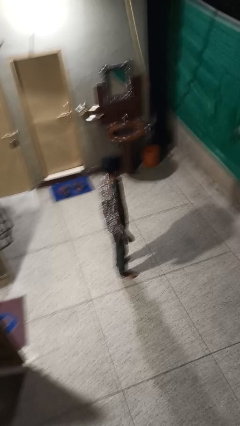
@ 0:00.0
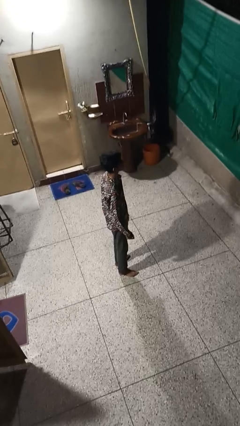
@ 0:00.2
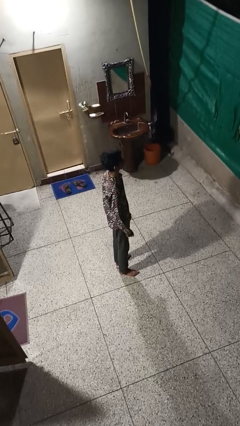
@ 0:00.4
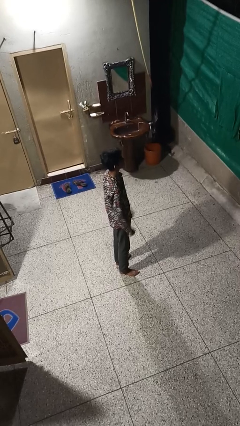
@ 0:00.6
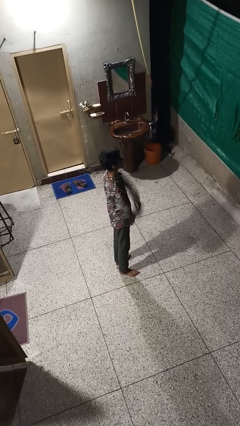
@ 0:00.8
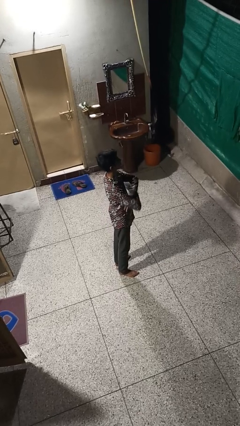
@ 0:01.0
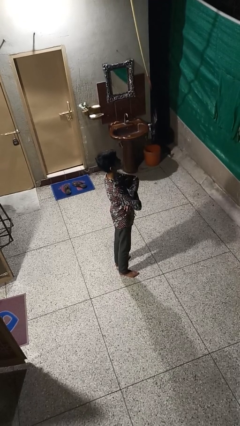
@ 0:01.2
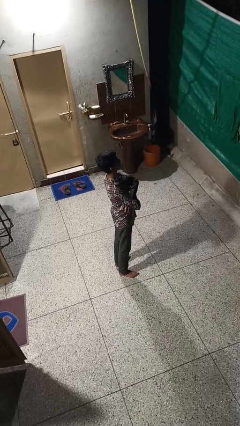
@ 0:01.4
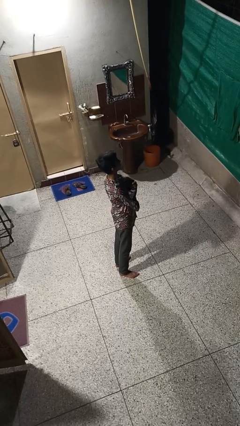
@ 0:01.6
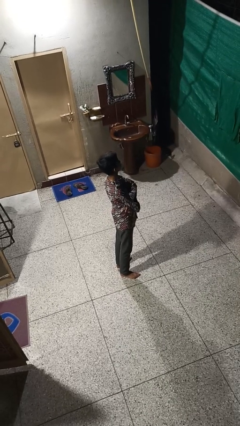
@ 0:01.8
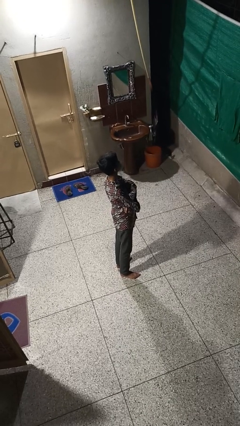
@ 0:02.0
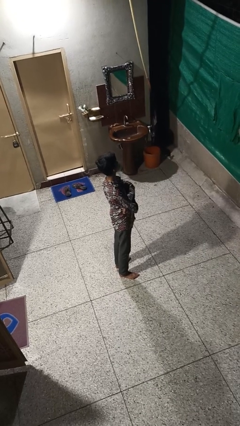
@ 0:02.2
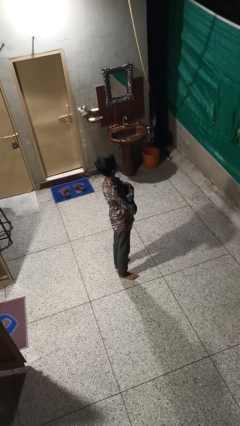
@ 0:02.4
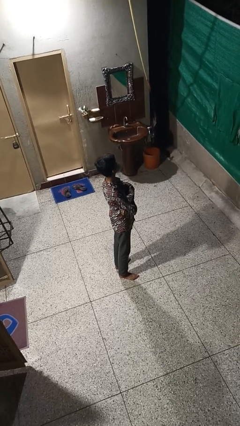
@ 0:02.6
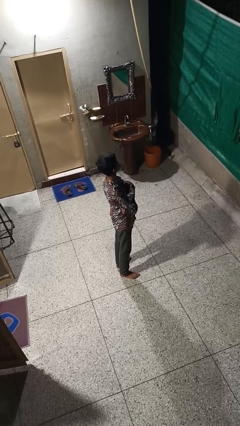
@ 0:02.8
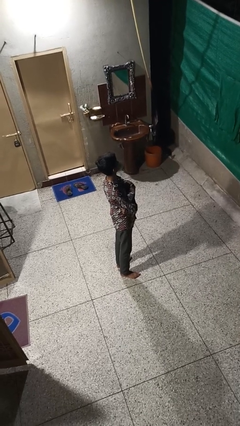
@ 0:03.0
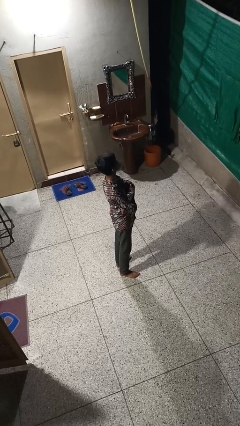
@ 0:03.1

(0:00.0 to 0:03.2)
person crosses arms

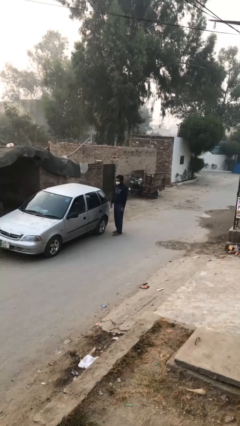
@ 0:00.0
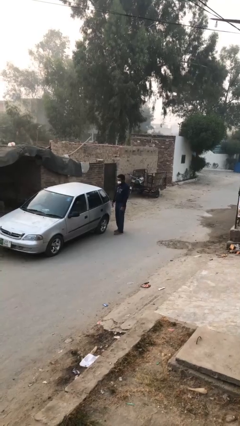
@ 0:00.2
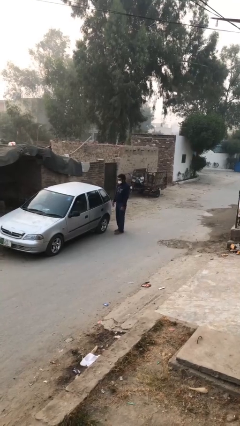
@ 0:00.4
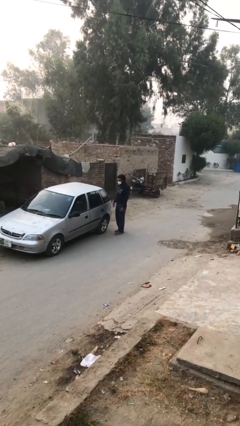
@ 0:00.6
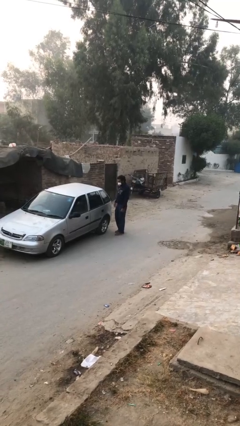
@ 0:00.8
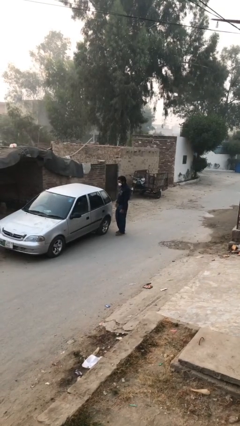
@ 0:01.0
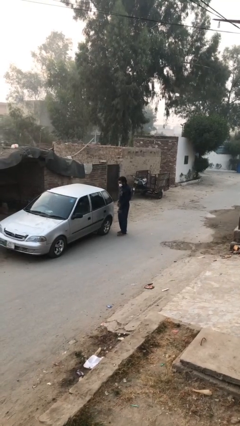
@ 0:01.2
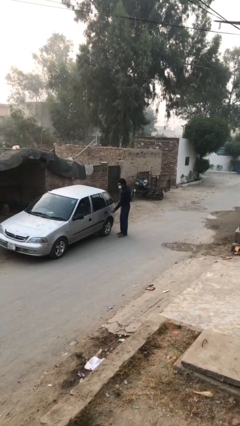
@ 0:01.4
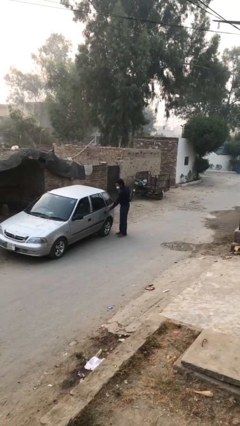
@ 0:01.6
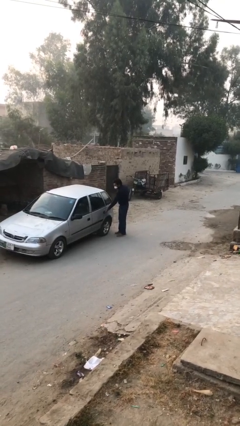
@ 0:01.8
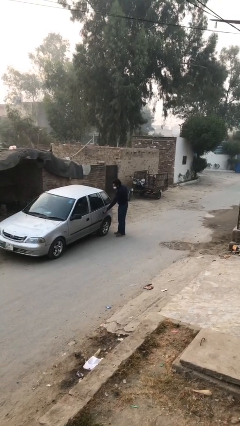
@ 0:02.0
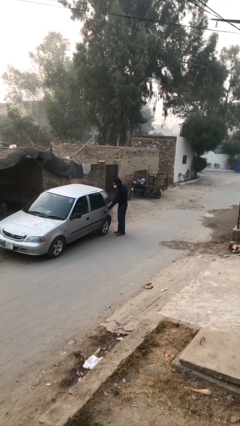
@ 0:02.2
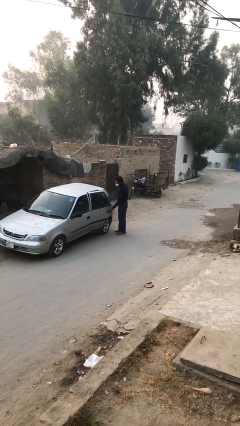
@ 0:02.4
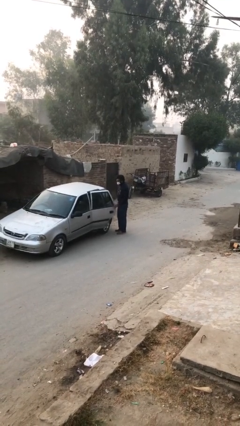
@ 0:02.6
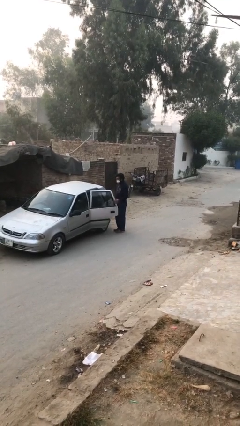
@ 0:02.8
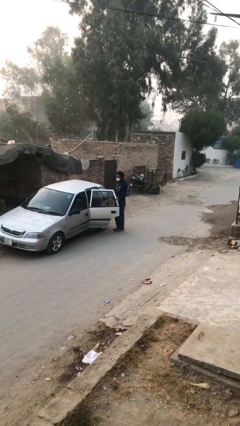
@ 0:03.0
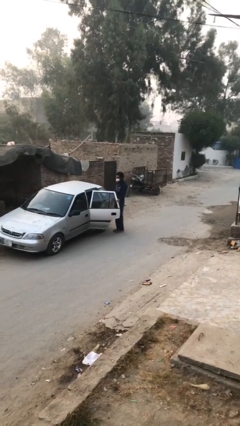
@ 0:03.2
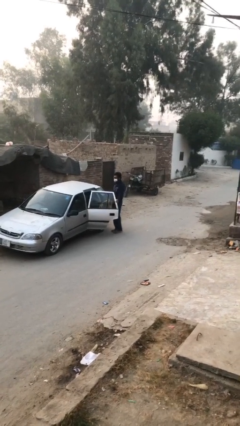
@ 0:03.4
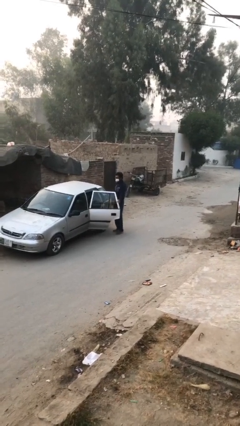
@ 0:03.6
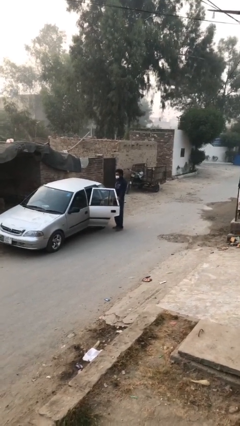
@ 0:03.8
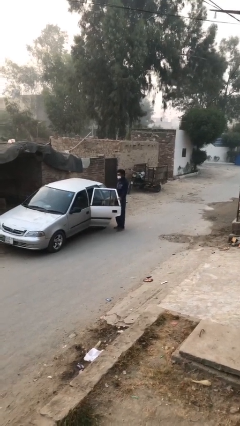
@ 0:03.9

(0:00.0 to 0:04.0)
person opens car door

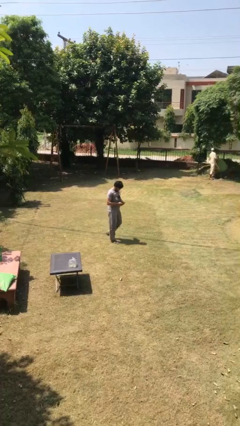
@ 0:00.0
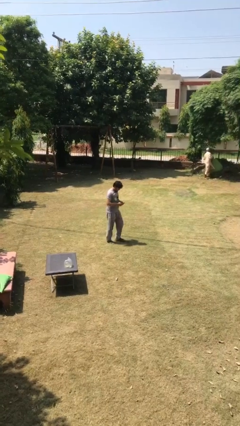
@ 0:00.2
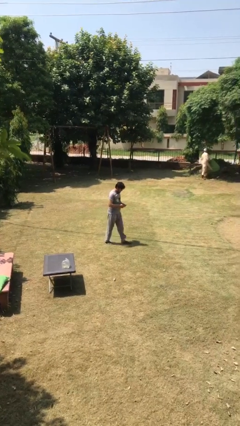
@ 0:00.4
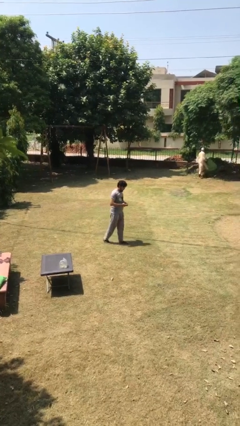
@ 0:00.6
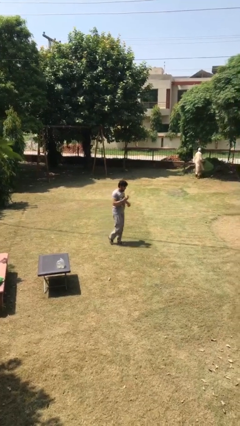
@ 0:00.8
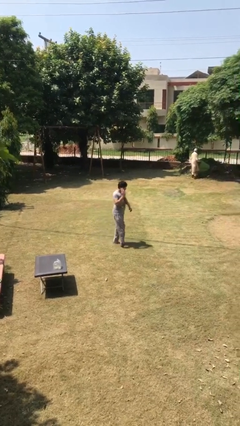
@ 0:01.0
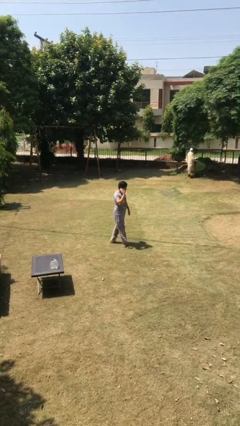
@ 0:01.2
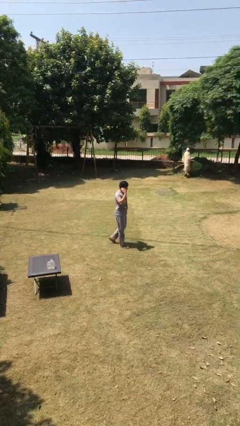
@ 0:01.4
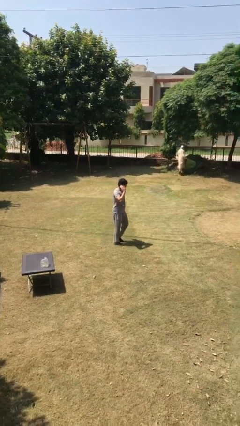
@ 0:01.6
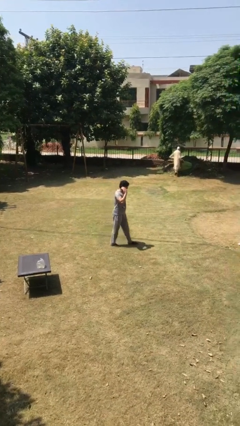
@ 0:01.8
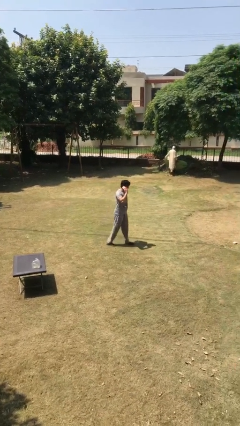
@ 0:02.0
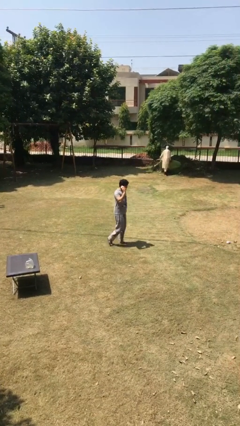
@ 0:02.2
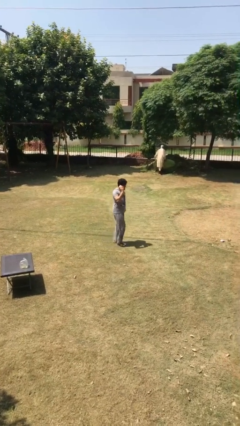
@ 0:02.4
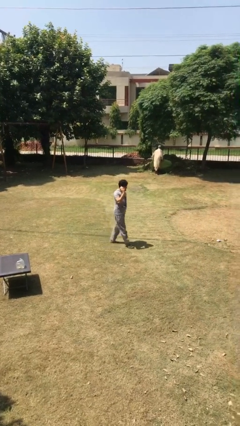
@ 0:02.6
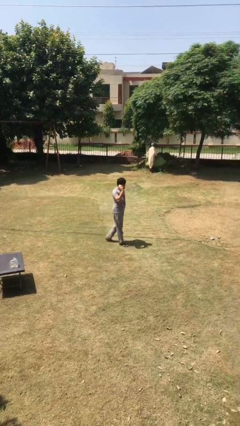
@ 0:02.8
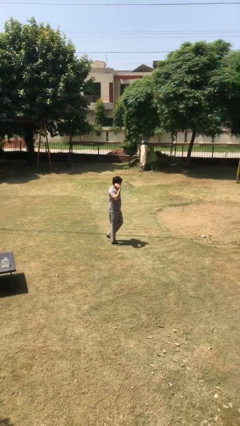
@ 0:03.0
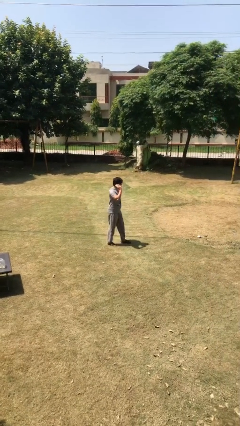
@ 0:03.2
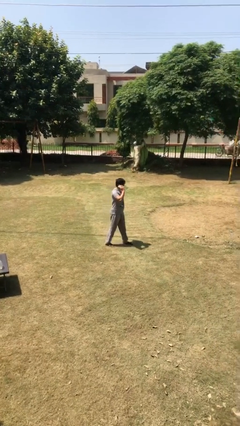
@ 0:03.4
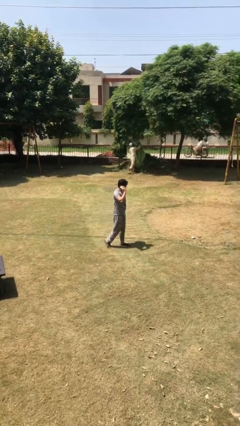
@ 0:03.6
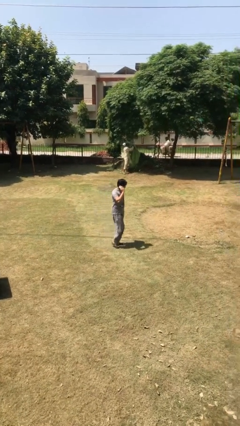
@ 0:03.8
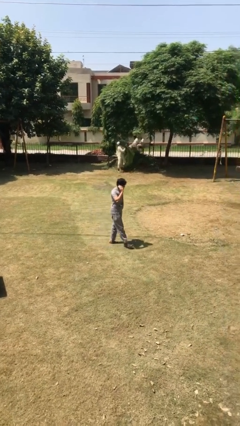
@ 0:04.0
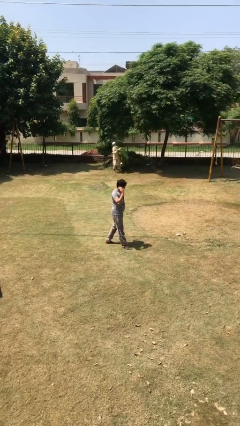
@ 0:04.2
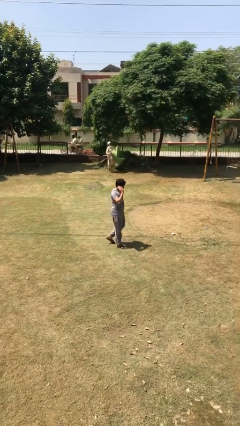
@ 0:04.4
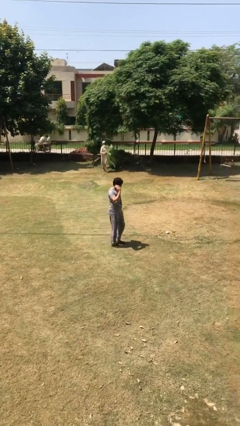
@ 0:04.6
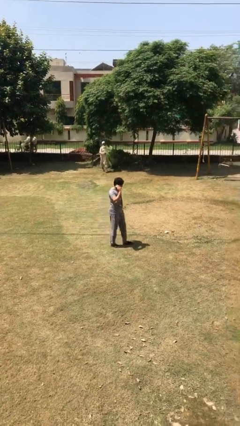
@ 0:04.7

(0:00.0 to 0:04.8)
person talks on phone

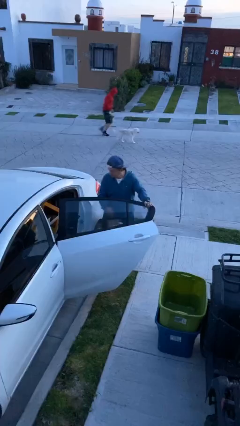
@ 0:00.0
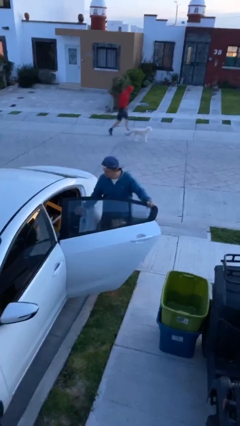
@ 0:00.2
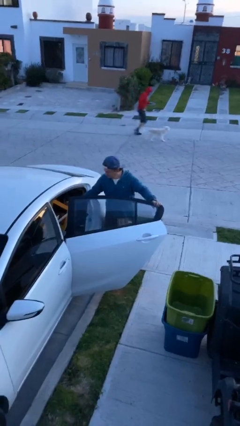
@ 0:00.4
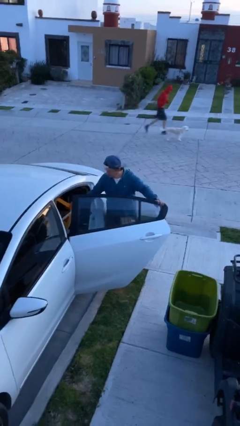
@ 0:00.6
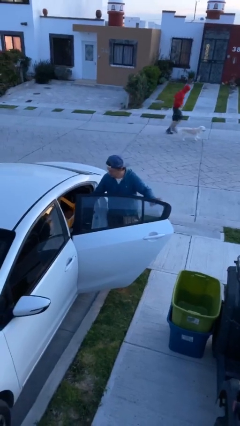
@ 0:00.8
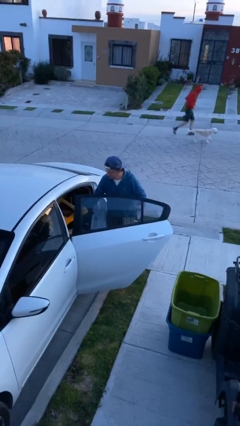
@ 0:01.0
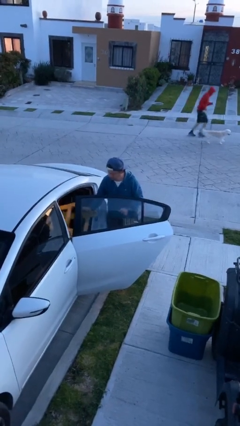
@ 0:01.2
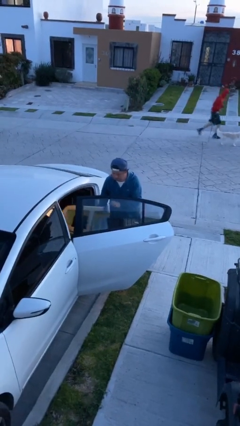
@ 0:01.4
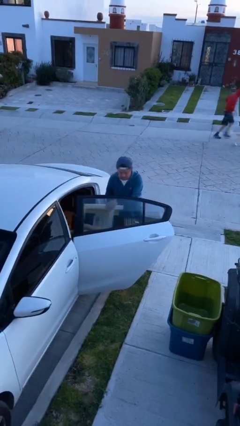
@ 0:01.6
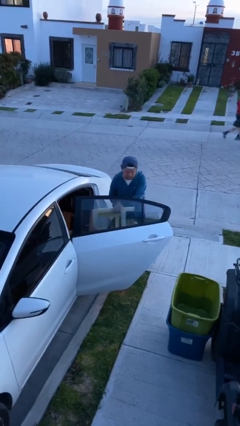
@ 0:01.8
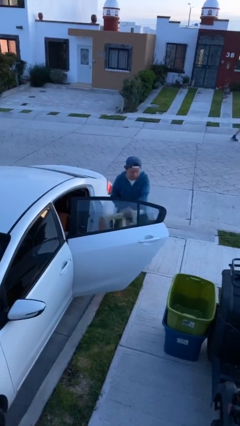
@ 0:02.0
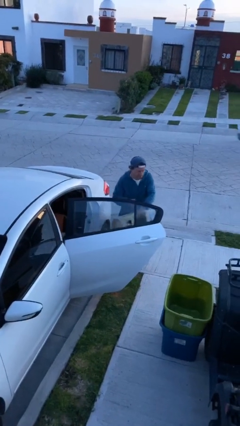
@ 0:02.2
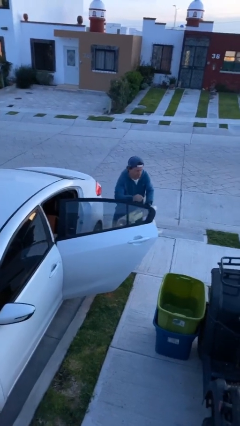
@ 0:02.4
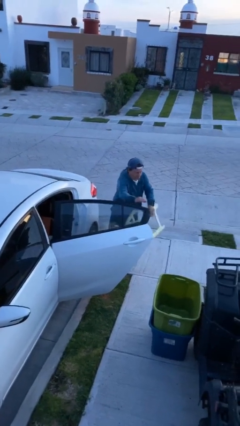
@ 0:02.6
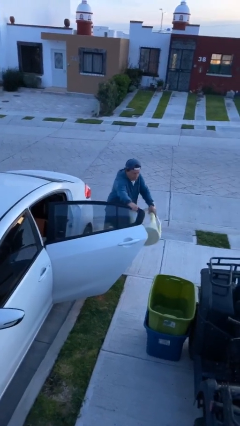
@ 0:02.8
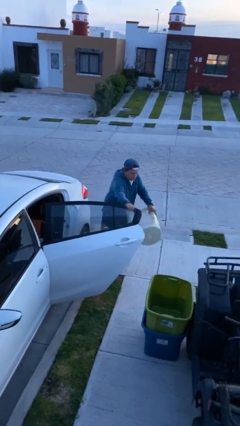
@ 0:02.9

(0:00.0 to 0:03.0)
person unloads car

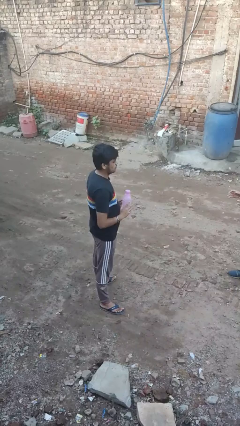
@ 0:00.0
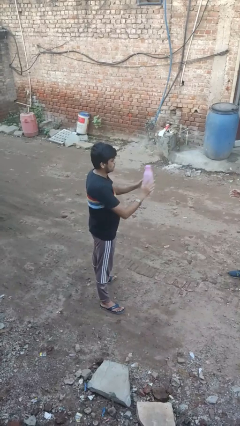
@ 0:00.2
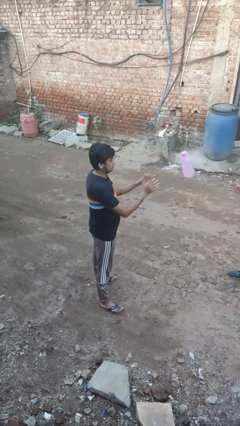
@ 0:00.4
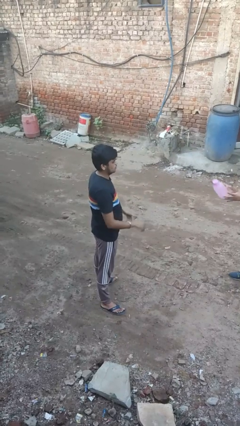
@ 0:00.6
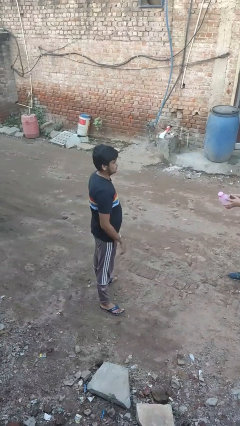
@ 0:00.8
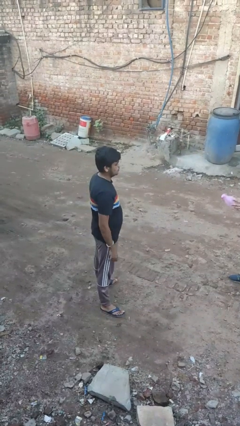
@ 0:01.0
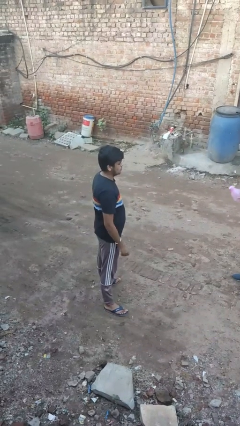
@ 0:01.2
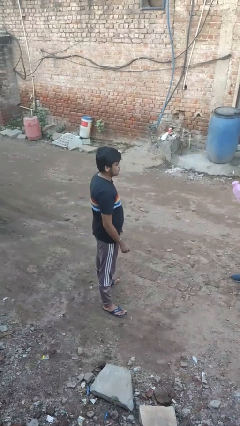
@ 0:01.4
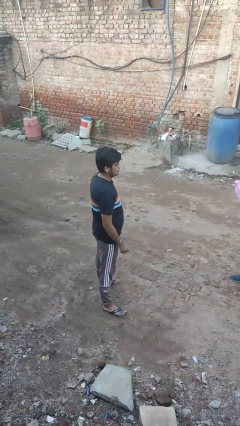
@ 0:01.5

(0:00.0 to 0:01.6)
person throws object to person

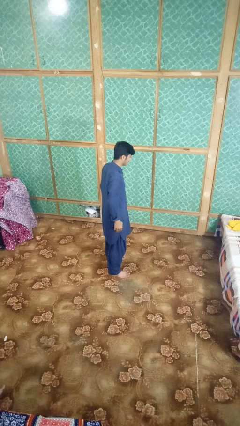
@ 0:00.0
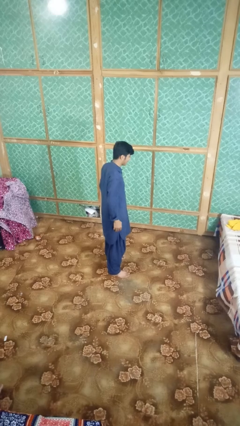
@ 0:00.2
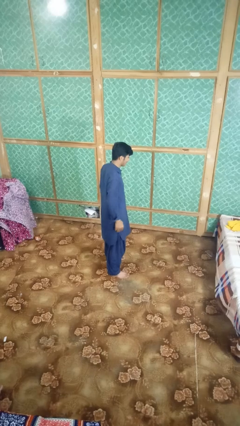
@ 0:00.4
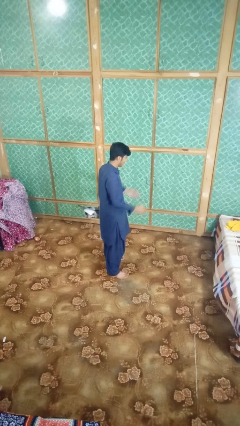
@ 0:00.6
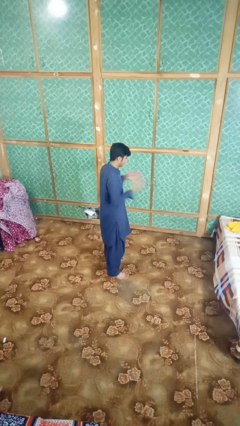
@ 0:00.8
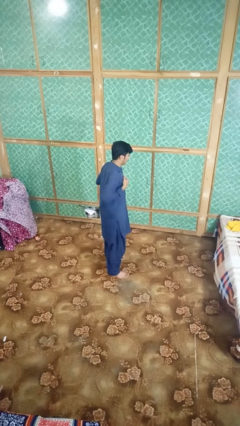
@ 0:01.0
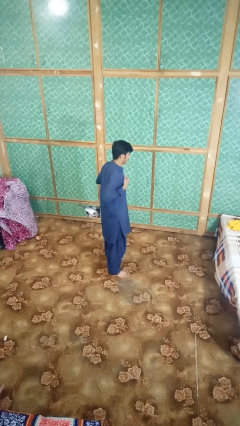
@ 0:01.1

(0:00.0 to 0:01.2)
person drums on chest
